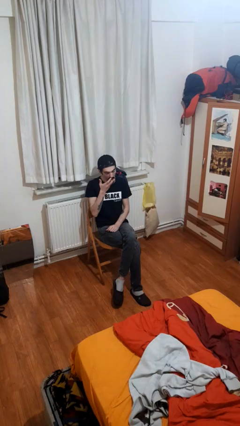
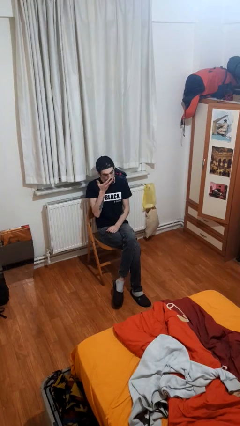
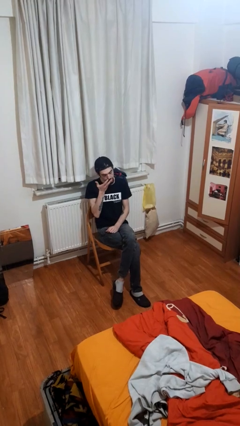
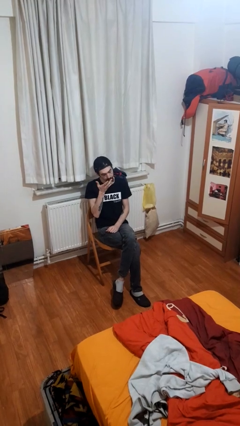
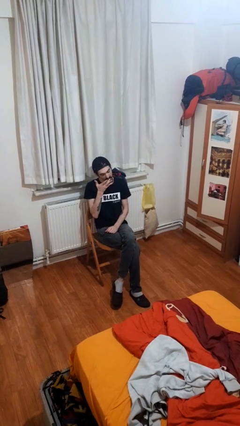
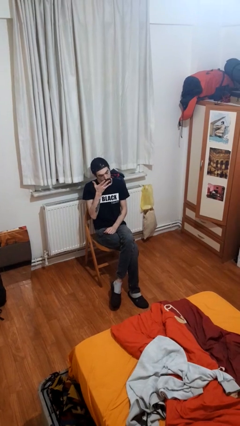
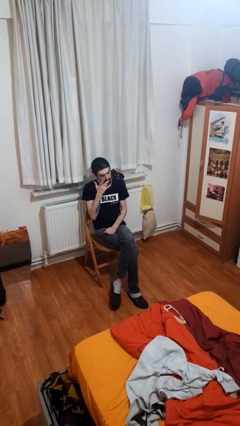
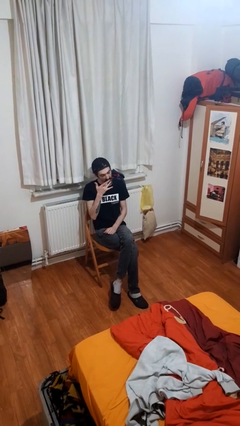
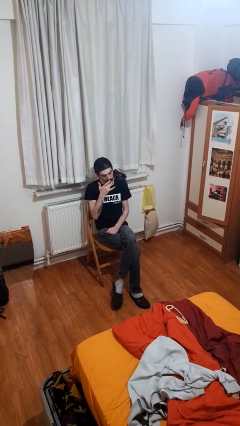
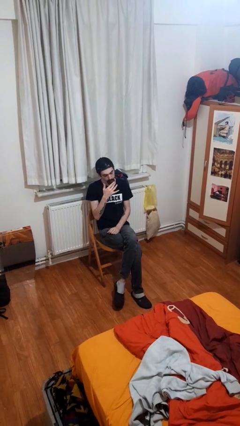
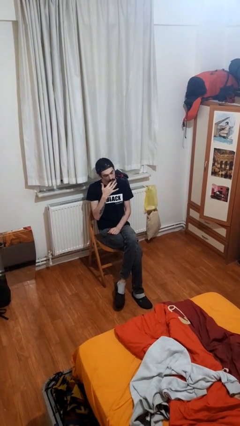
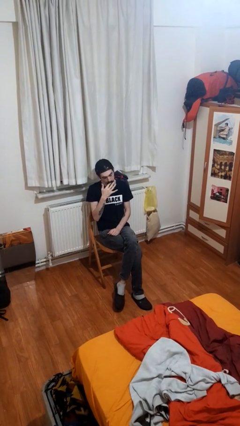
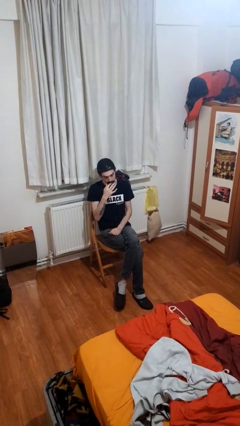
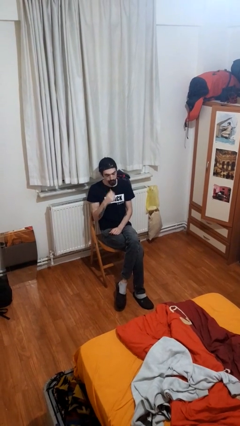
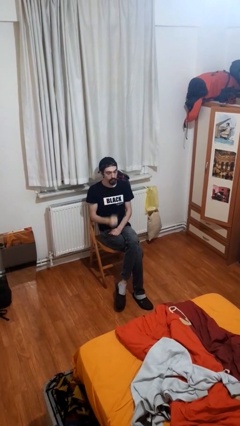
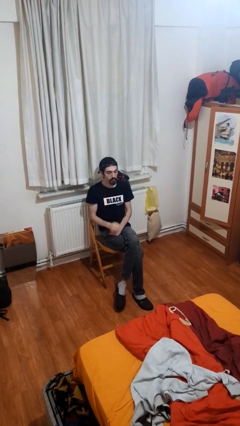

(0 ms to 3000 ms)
person licks fingers

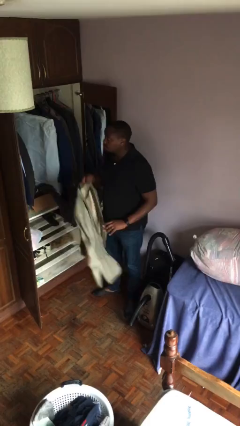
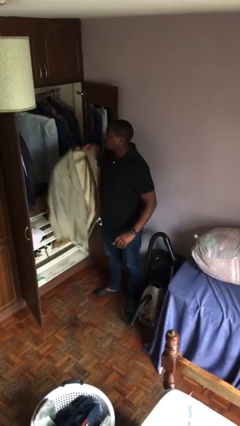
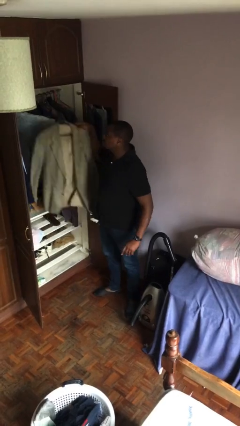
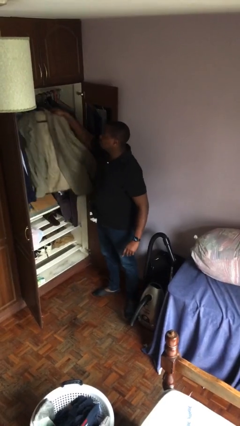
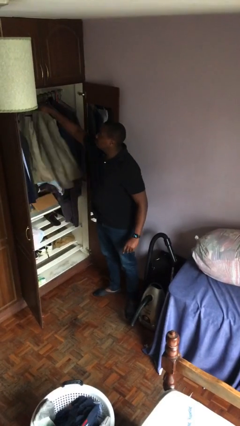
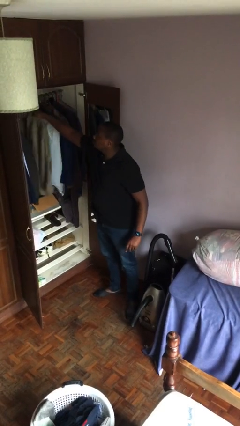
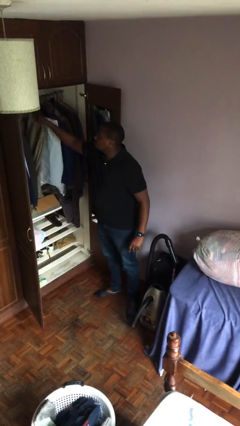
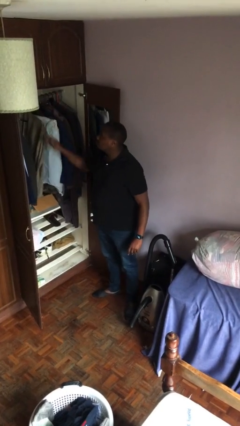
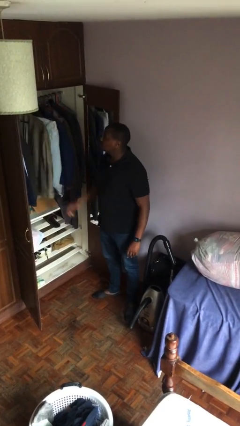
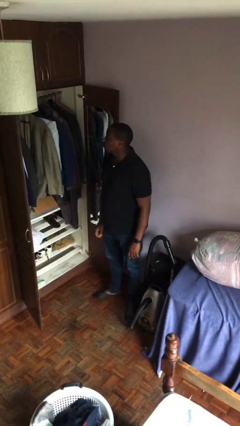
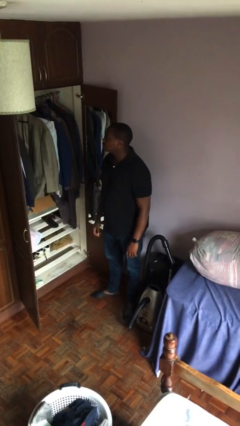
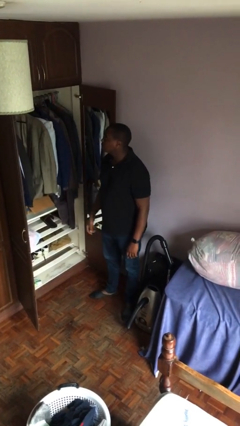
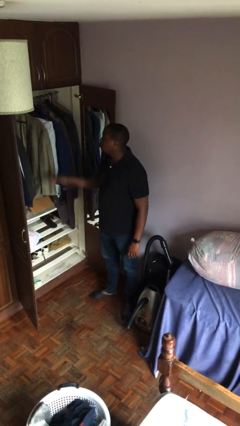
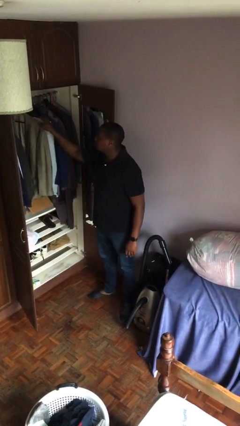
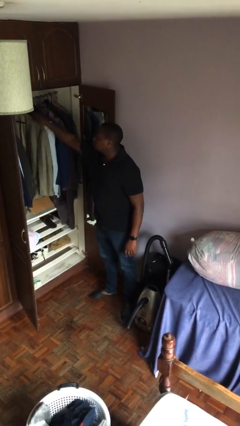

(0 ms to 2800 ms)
person puts clothes into closet

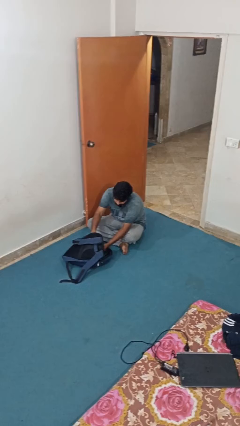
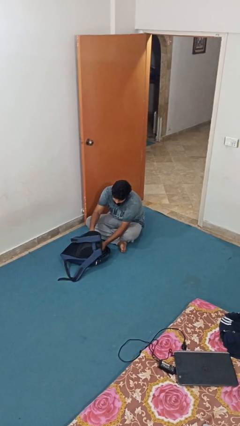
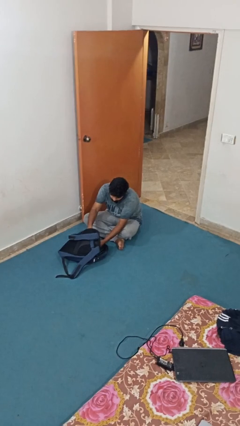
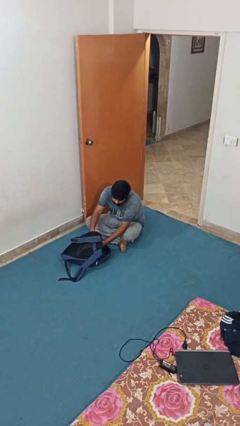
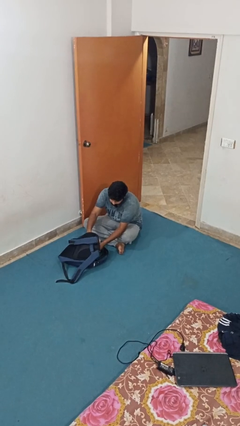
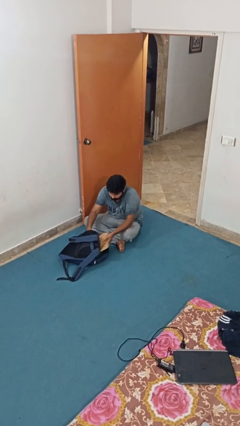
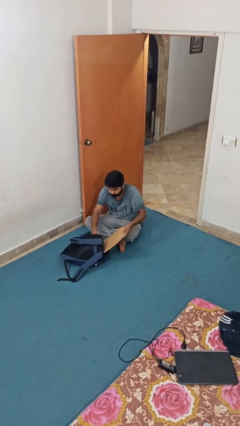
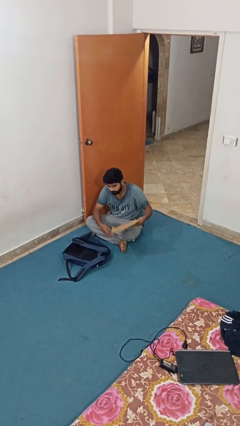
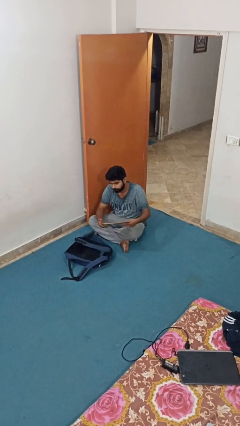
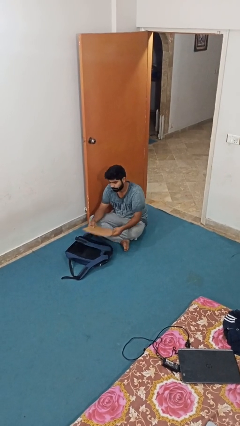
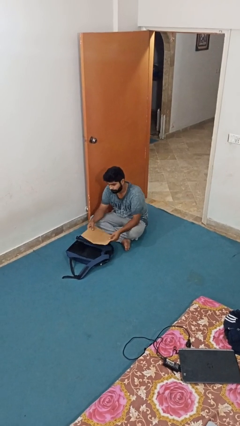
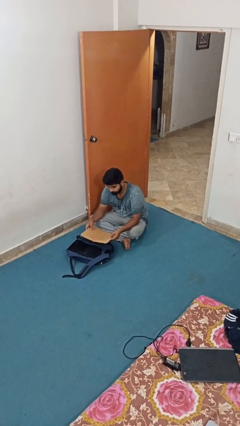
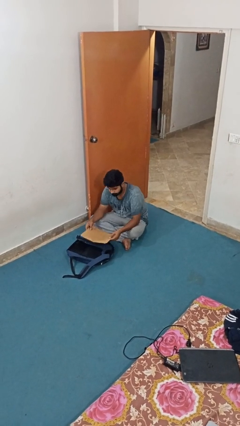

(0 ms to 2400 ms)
person takes object from backpack

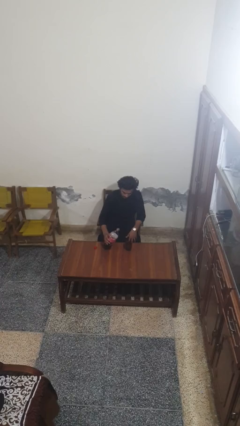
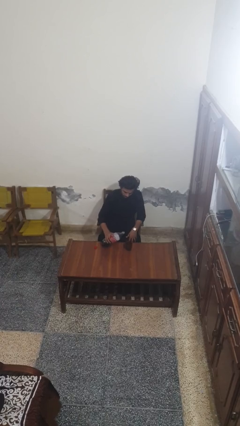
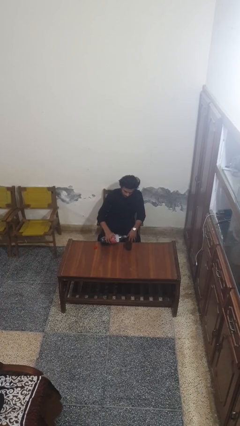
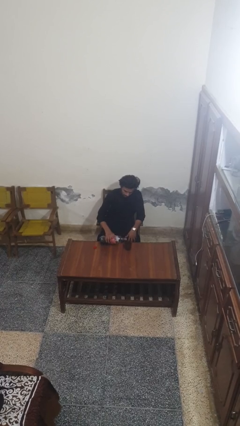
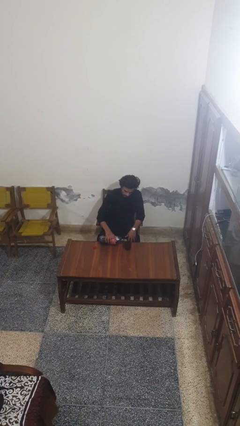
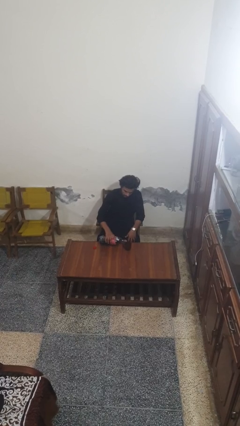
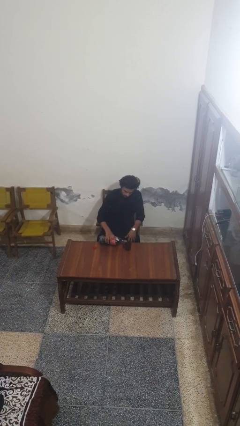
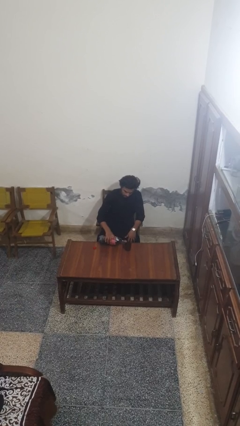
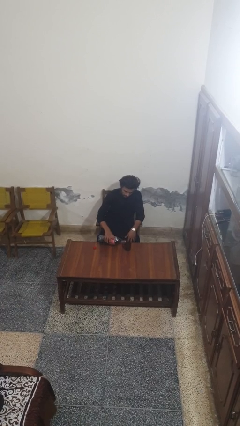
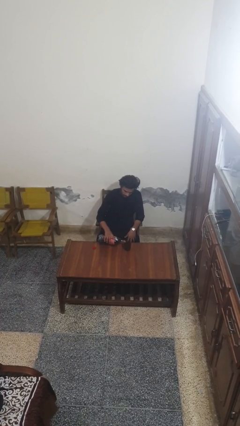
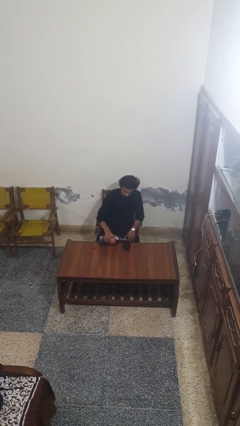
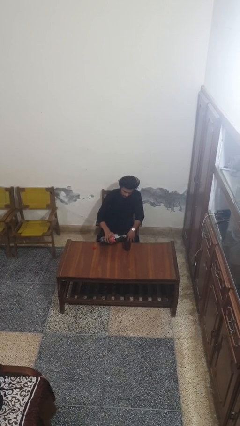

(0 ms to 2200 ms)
person pours liquid into cup

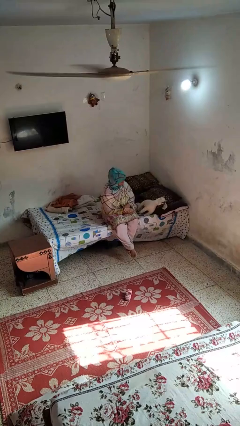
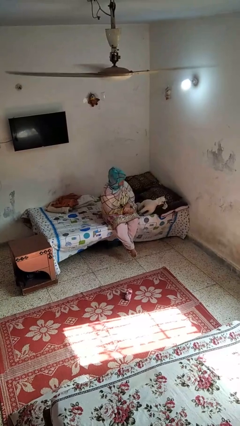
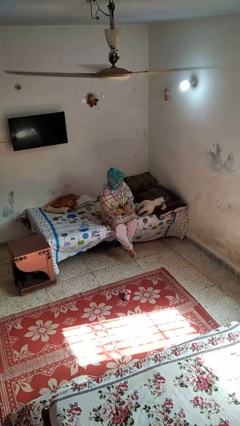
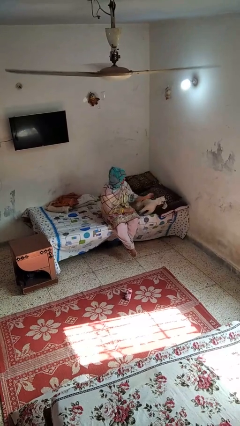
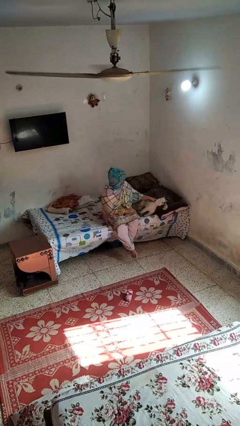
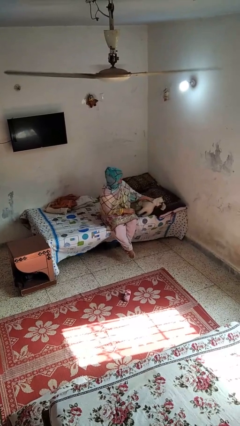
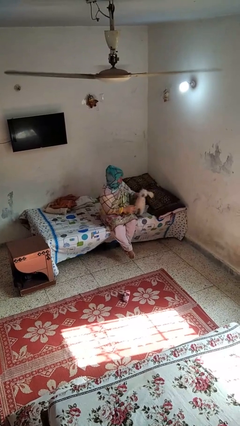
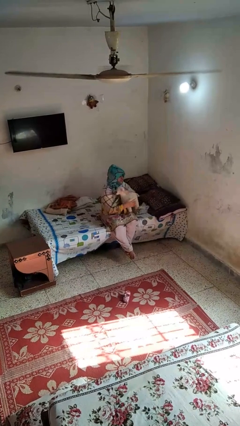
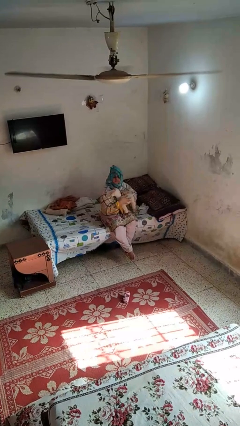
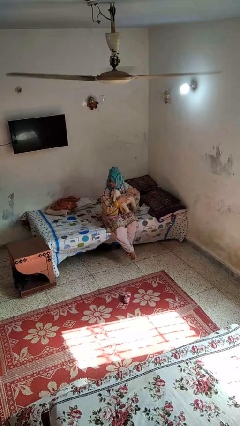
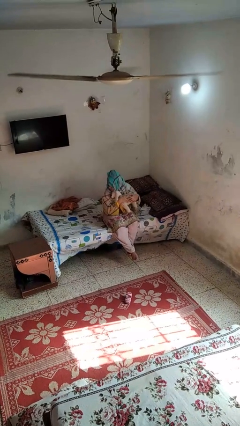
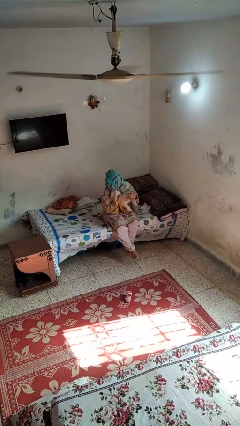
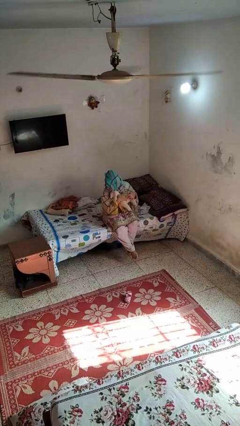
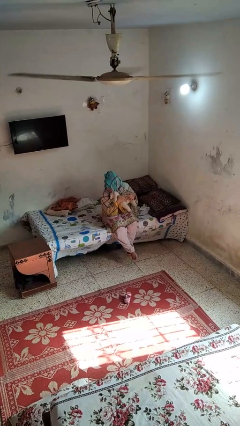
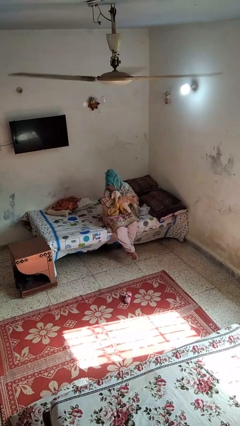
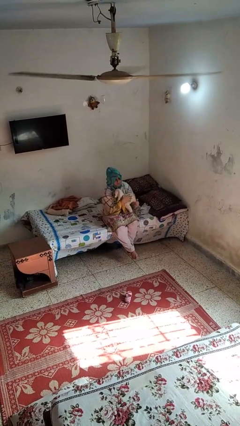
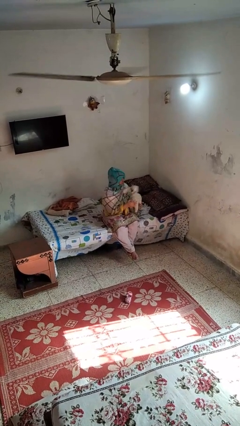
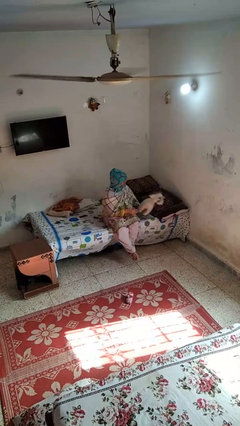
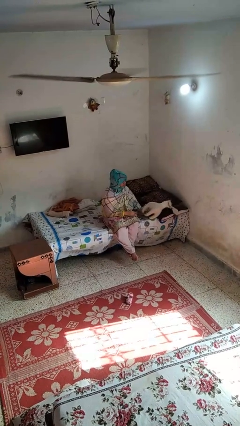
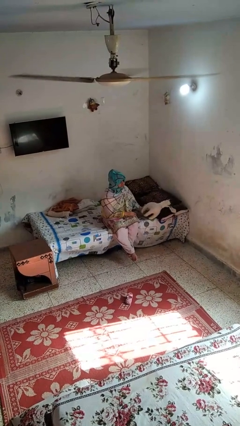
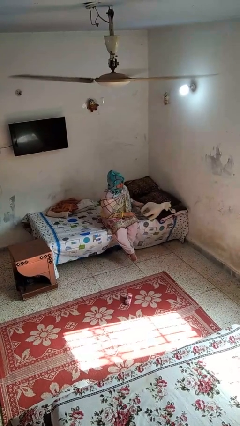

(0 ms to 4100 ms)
person hugs stuffed animal

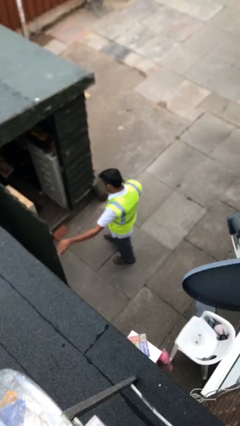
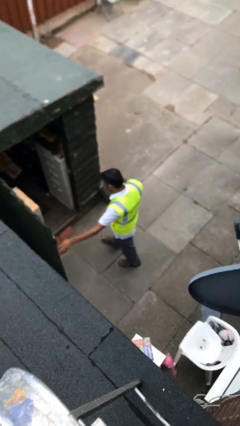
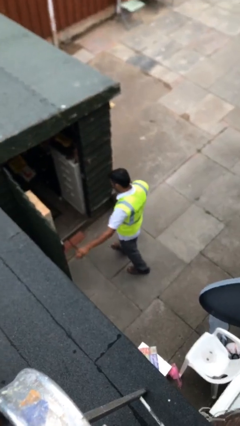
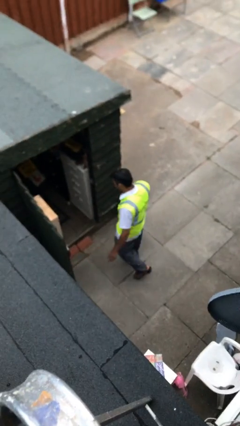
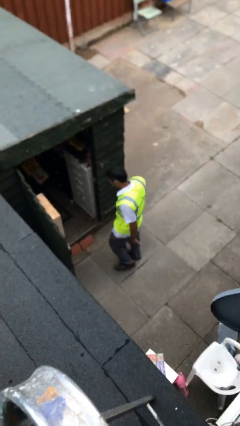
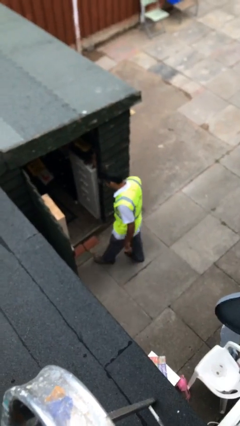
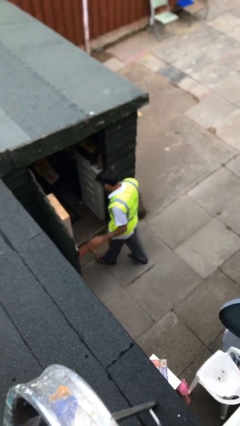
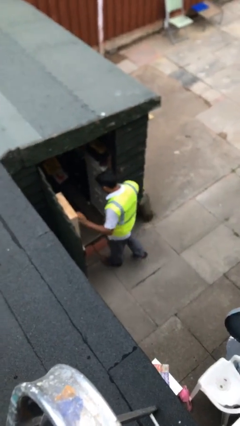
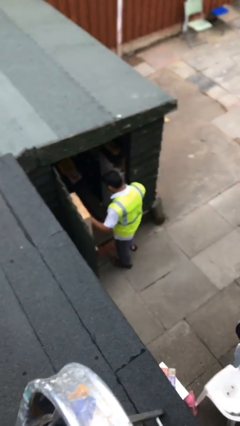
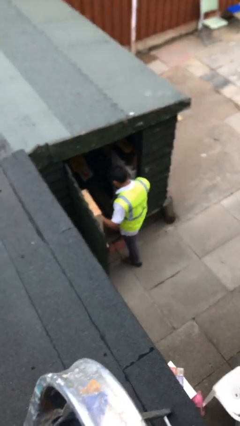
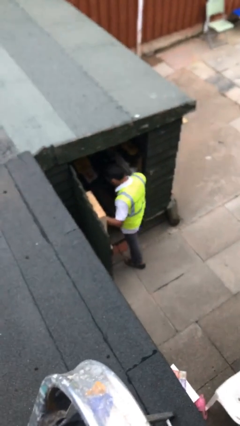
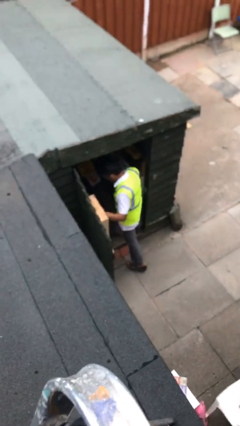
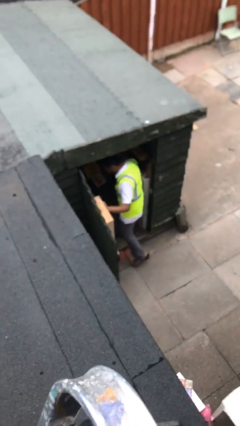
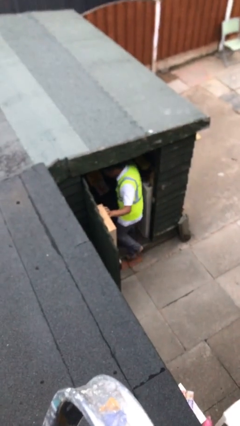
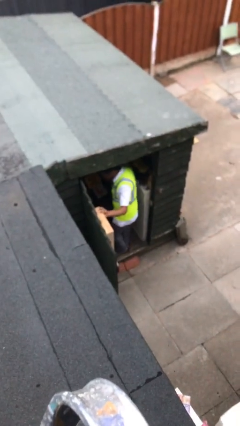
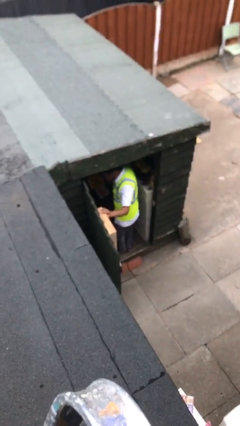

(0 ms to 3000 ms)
person exits scene through structure
